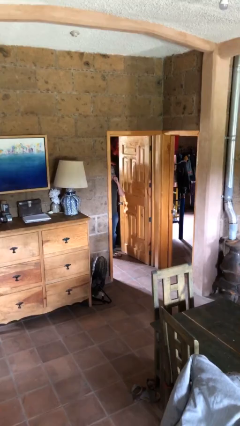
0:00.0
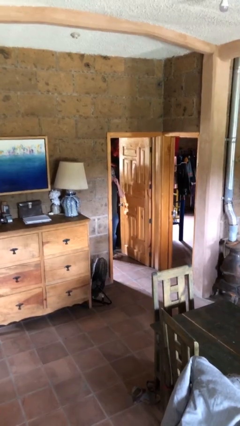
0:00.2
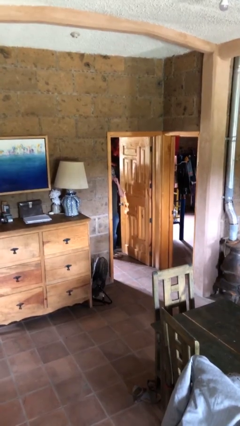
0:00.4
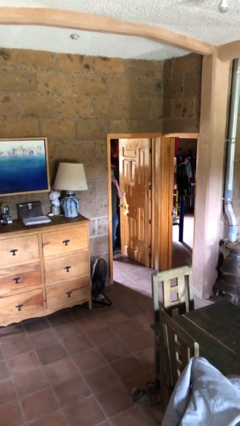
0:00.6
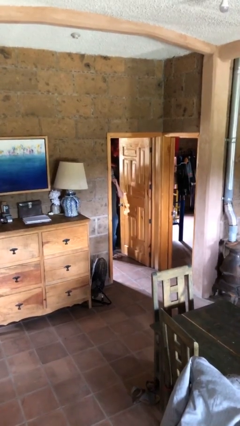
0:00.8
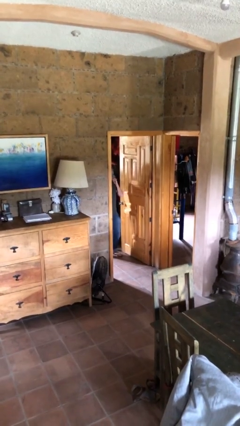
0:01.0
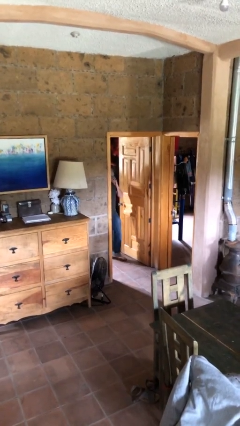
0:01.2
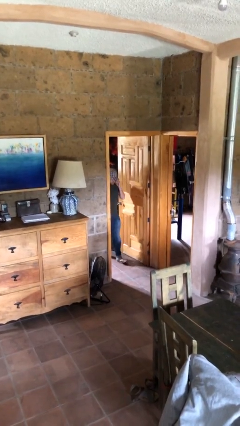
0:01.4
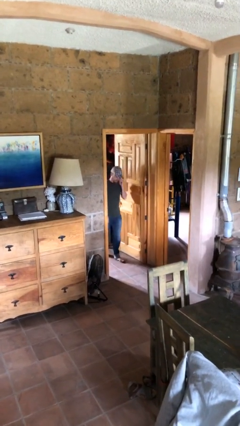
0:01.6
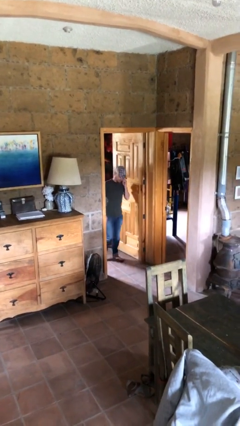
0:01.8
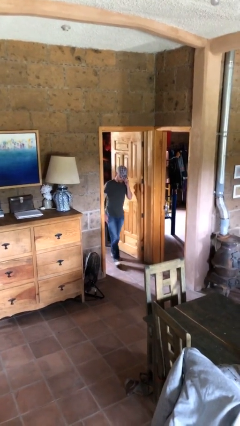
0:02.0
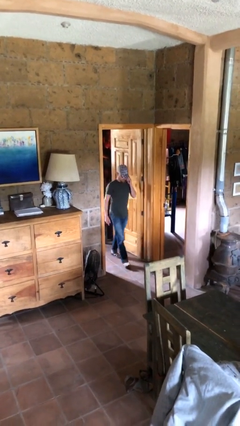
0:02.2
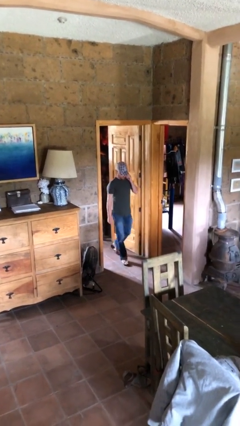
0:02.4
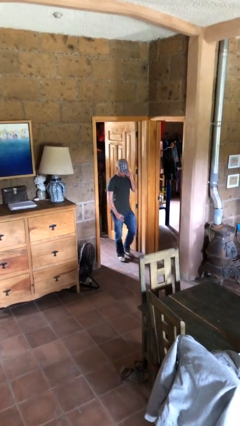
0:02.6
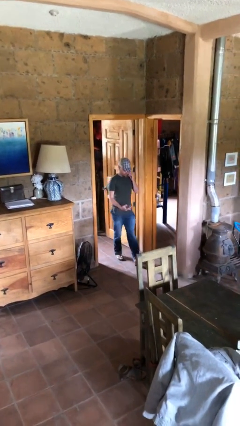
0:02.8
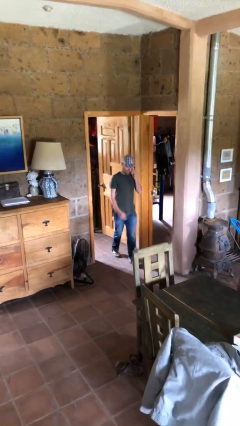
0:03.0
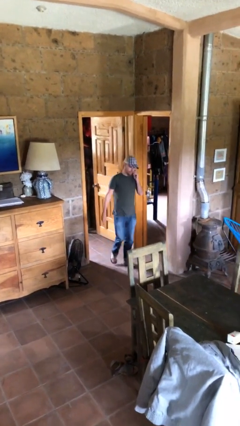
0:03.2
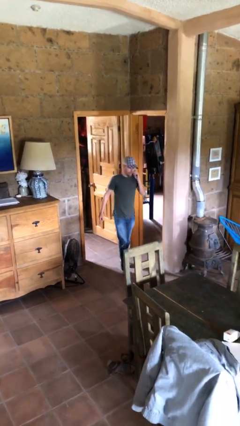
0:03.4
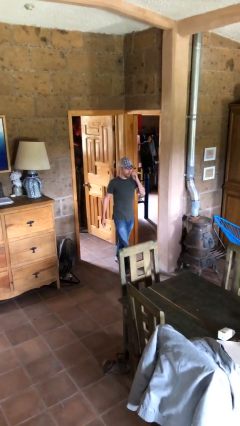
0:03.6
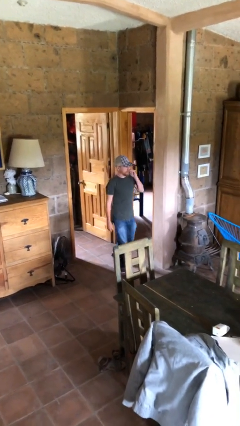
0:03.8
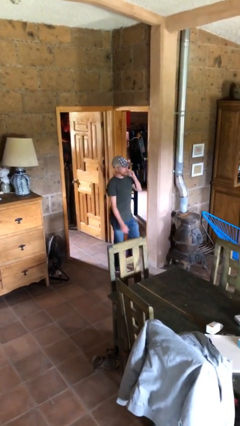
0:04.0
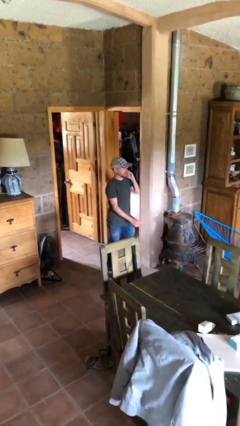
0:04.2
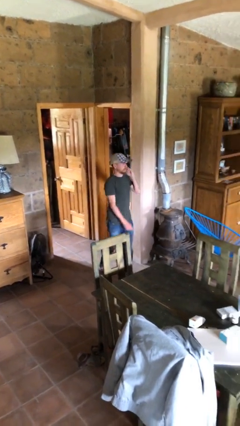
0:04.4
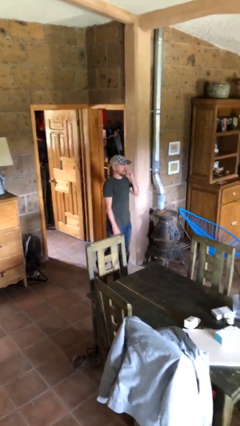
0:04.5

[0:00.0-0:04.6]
person enters scene through structure

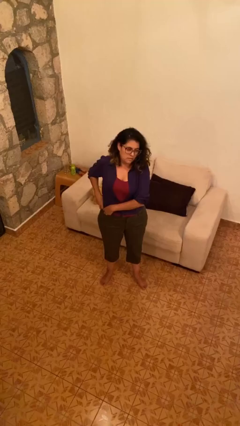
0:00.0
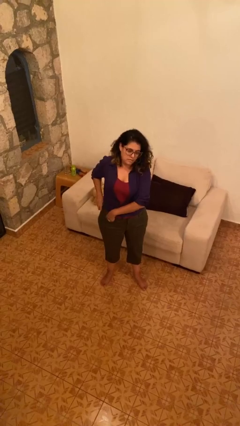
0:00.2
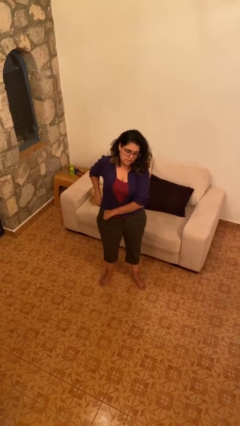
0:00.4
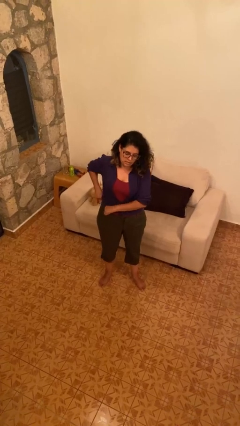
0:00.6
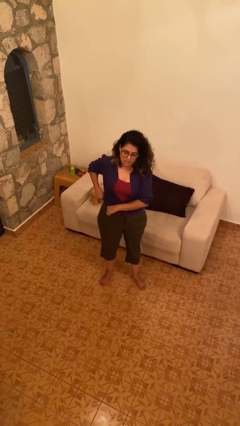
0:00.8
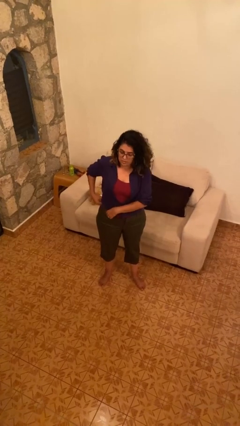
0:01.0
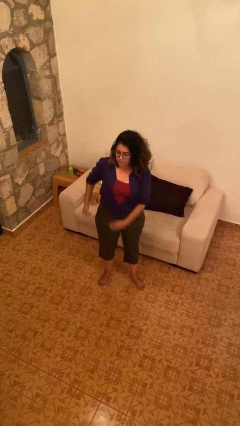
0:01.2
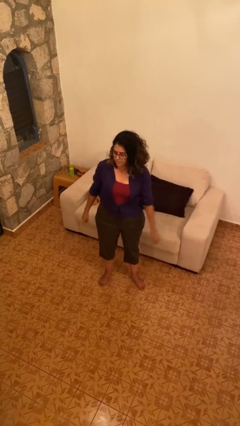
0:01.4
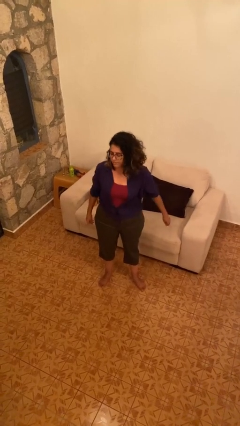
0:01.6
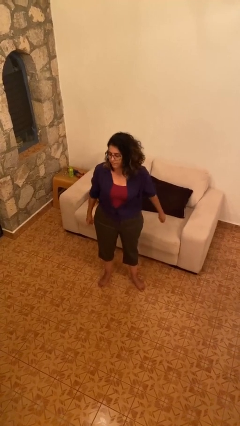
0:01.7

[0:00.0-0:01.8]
person hikes up pants

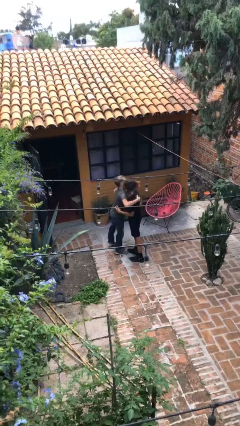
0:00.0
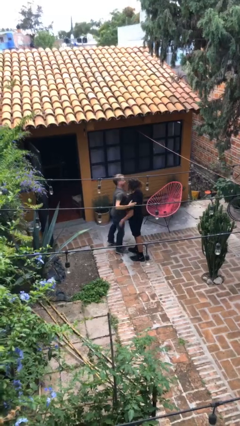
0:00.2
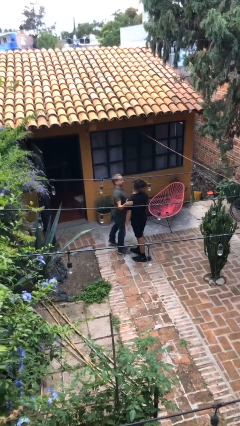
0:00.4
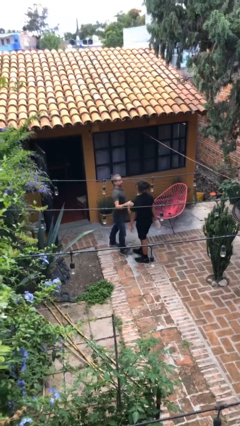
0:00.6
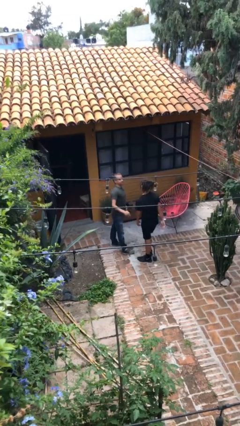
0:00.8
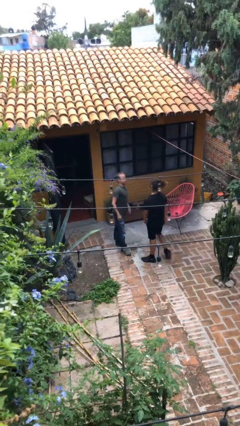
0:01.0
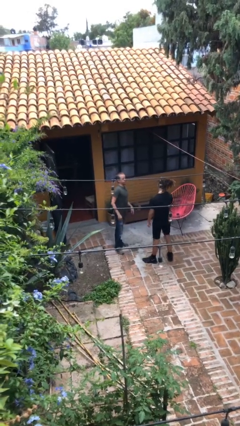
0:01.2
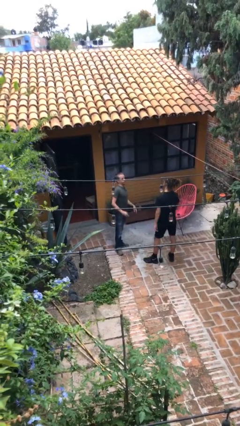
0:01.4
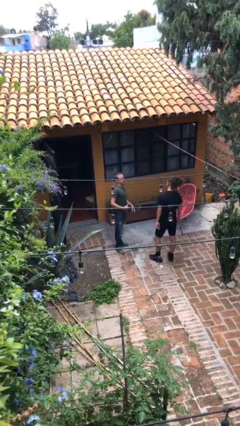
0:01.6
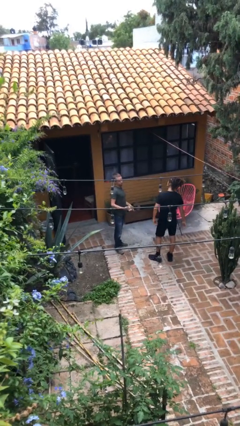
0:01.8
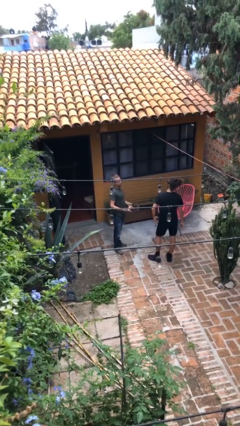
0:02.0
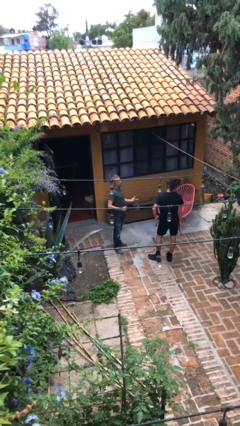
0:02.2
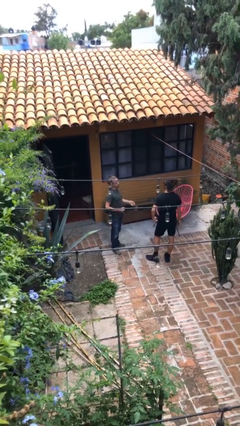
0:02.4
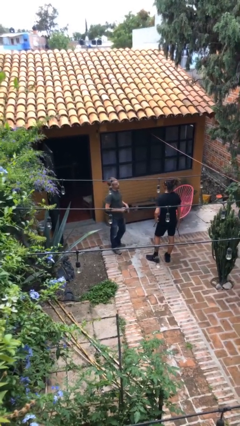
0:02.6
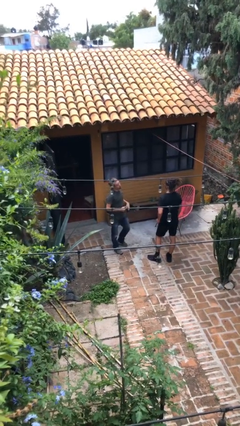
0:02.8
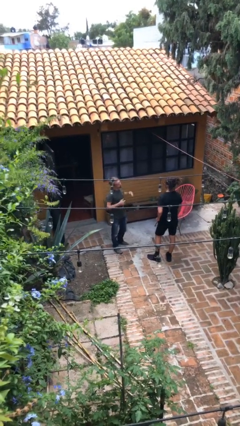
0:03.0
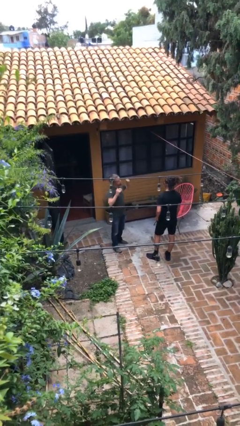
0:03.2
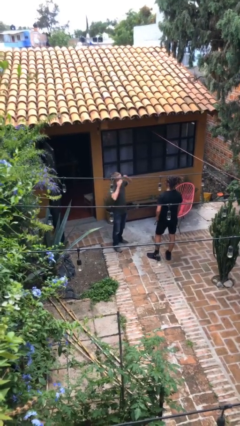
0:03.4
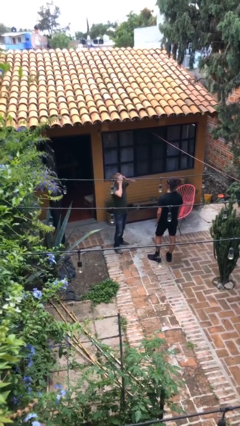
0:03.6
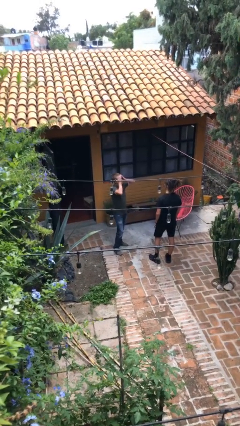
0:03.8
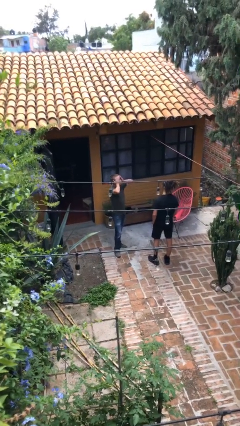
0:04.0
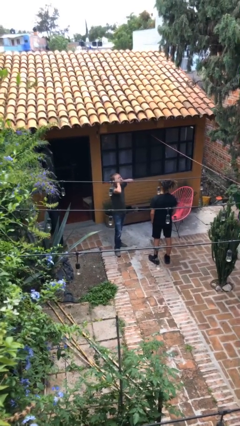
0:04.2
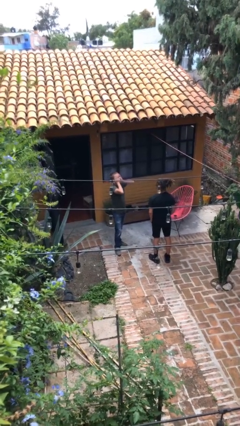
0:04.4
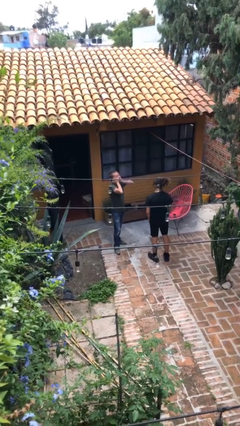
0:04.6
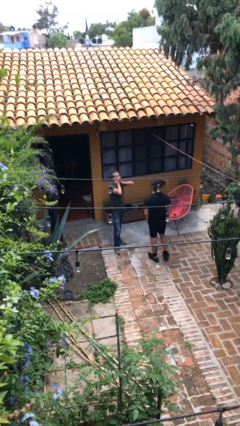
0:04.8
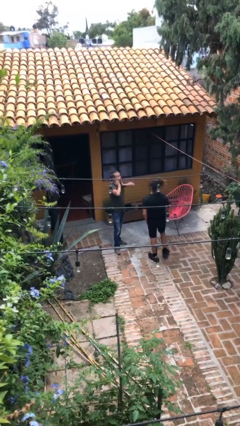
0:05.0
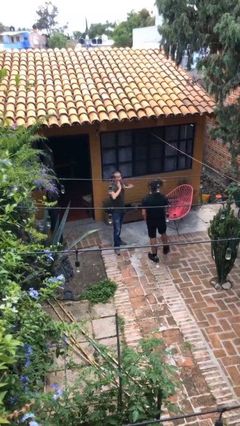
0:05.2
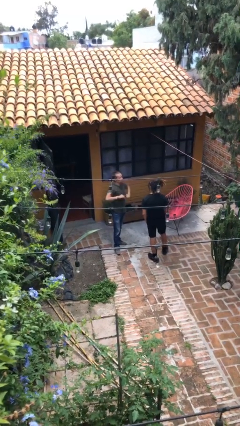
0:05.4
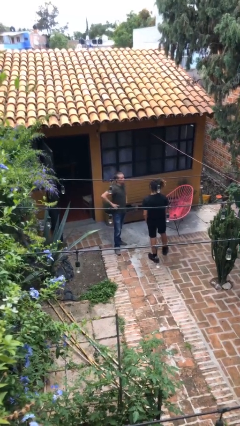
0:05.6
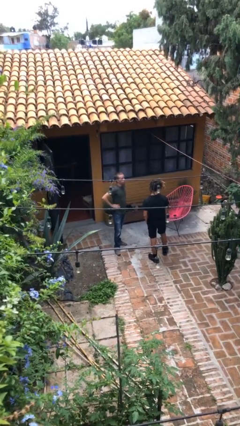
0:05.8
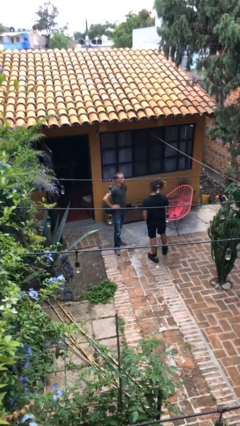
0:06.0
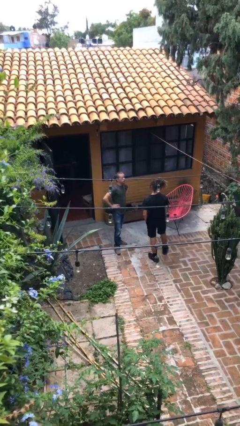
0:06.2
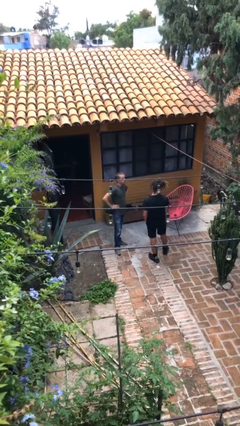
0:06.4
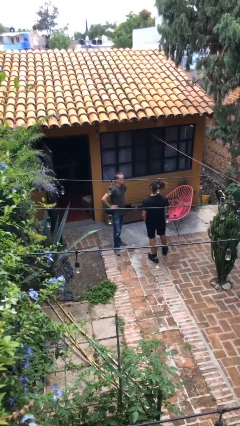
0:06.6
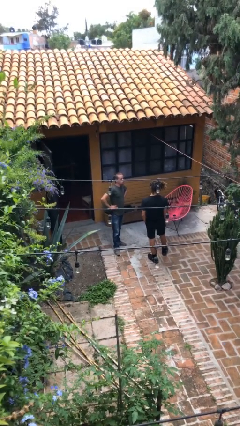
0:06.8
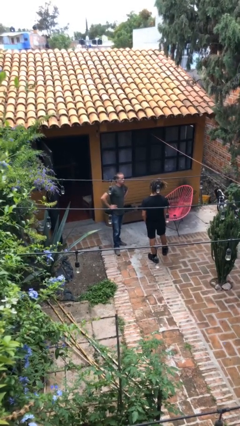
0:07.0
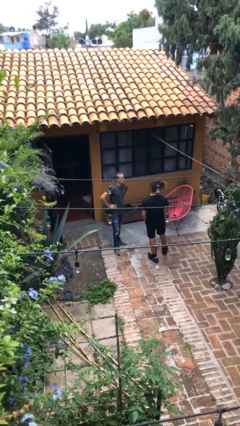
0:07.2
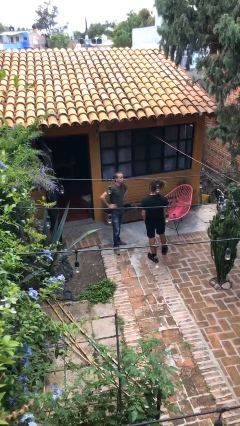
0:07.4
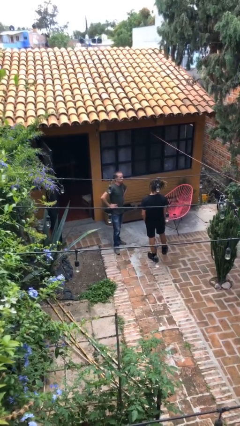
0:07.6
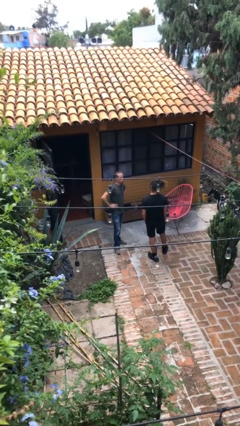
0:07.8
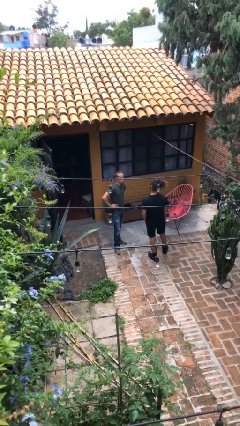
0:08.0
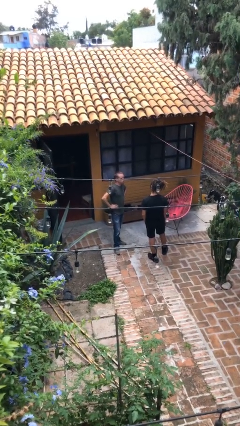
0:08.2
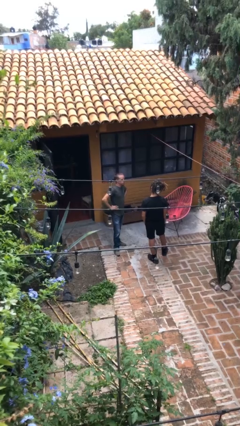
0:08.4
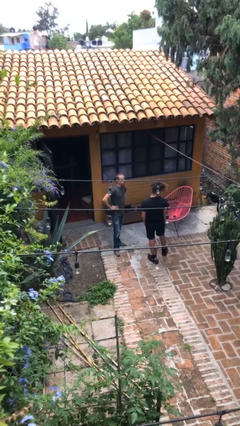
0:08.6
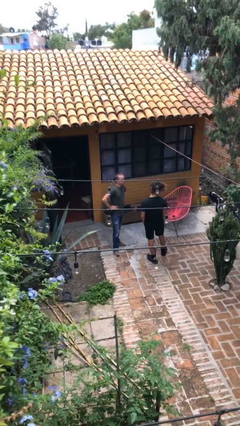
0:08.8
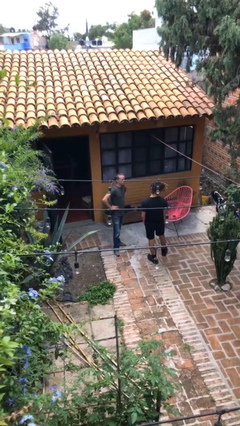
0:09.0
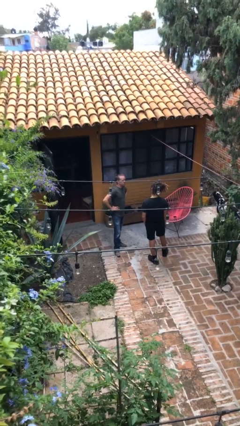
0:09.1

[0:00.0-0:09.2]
person talks to person

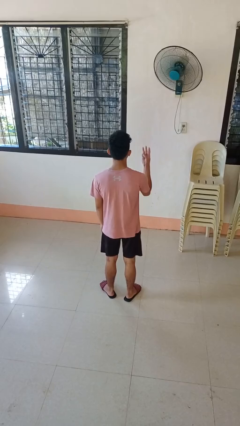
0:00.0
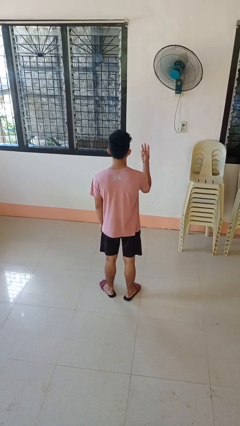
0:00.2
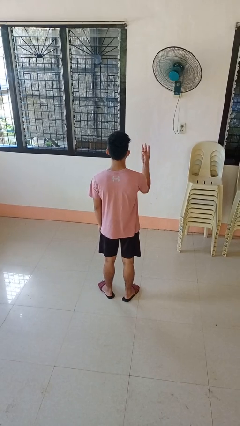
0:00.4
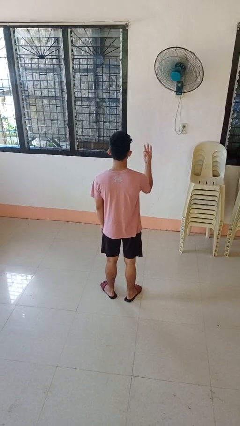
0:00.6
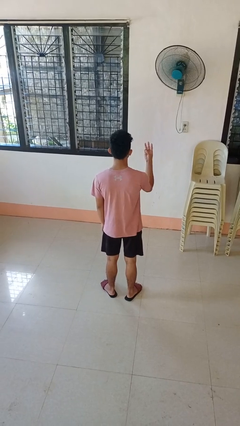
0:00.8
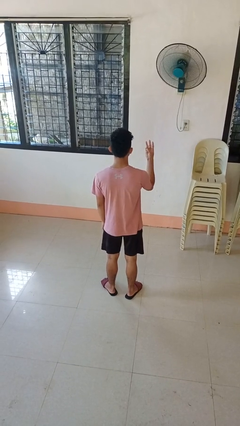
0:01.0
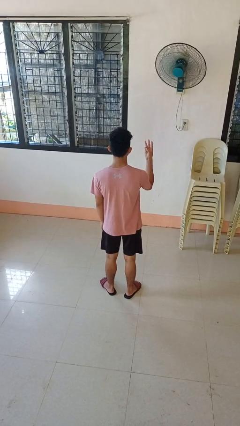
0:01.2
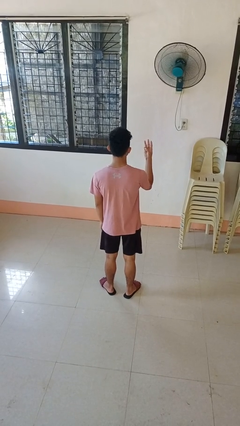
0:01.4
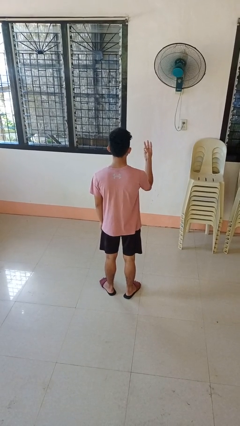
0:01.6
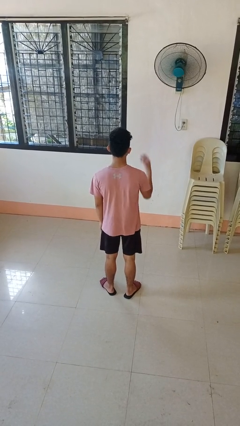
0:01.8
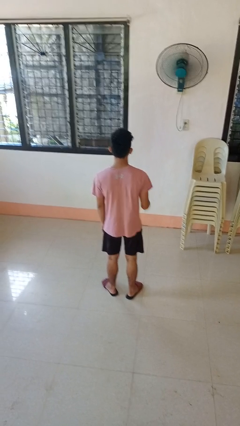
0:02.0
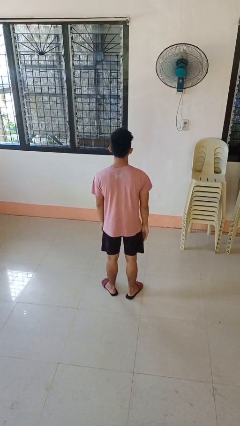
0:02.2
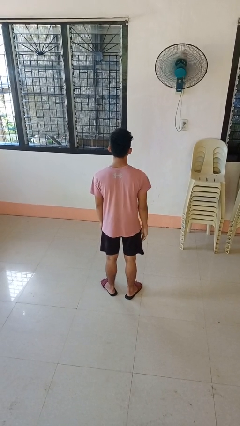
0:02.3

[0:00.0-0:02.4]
person gestures number three
